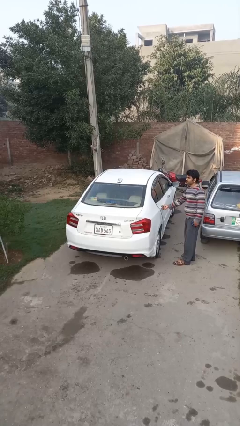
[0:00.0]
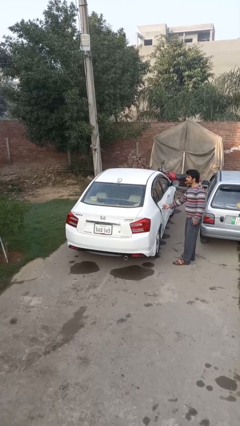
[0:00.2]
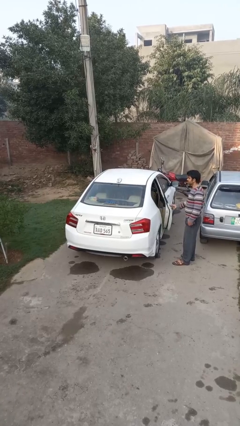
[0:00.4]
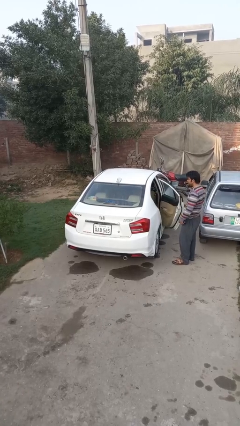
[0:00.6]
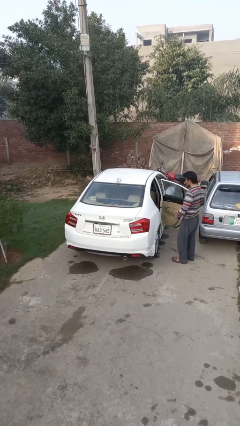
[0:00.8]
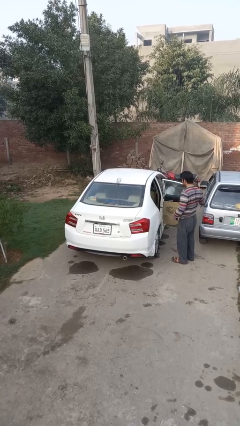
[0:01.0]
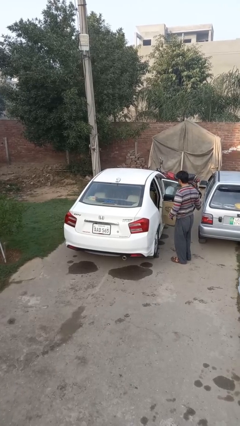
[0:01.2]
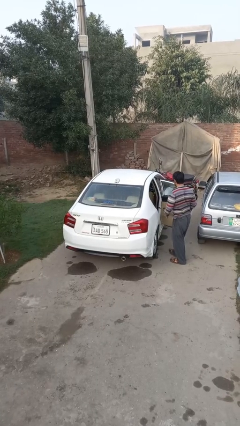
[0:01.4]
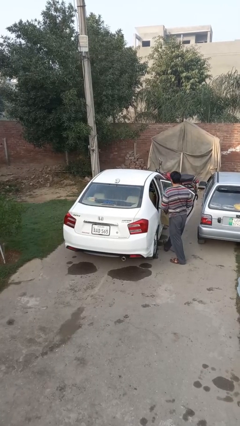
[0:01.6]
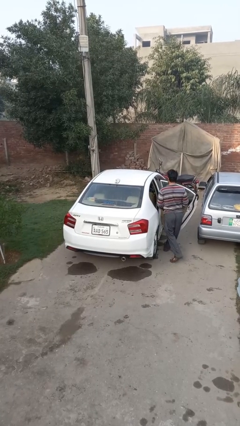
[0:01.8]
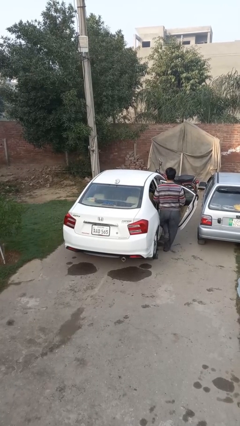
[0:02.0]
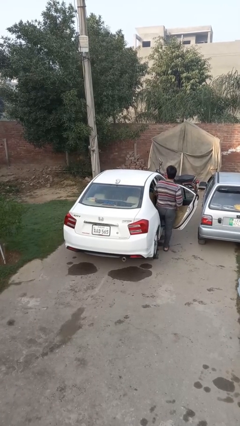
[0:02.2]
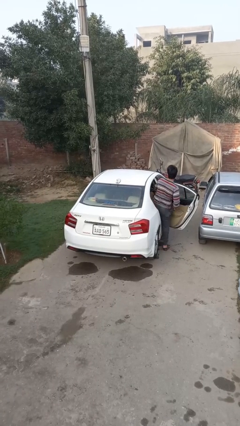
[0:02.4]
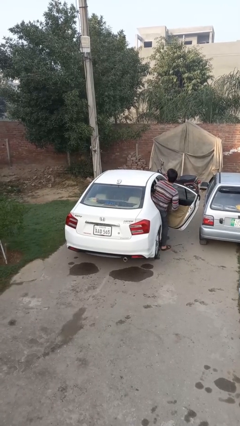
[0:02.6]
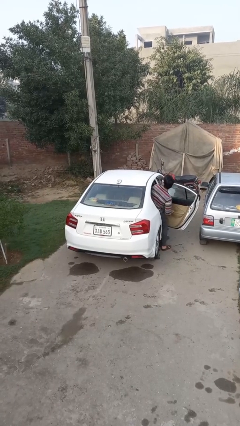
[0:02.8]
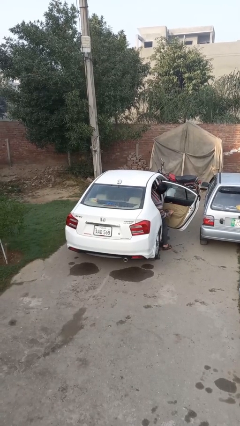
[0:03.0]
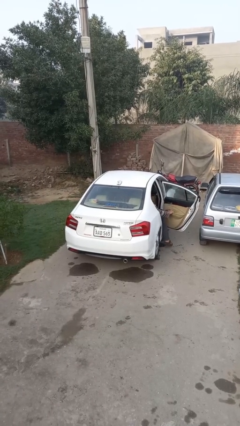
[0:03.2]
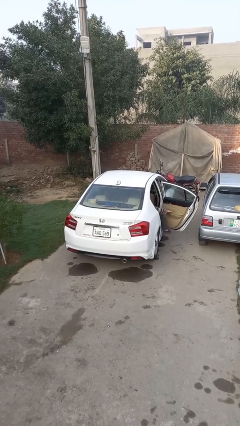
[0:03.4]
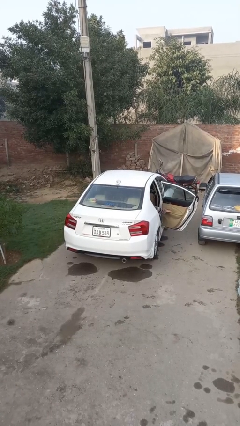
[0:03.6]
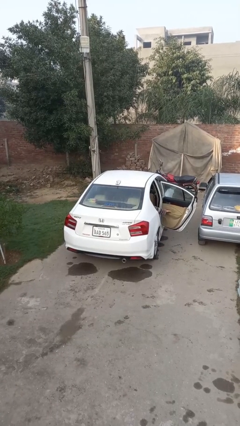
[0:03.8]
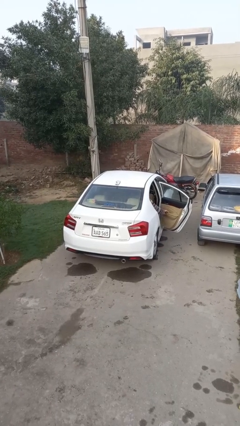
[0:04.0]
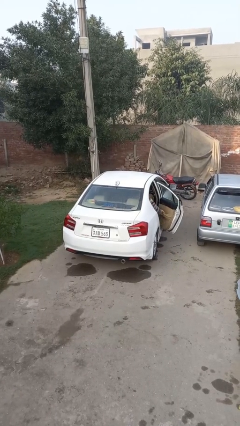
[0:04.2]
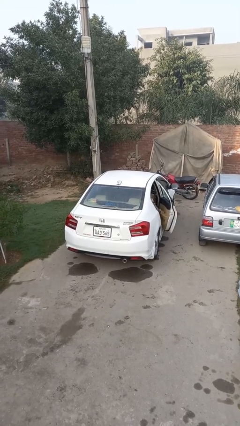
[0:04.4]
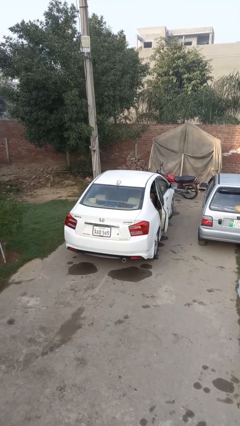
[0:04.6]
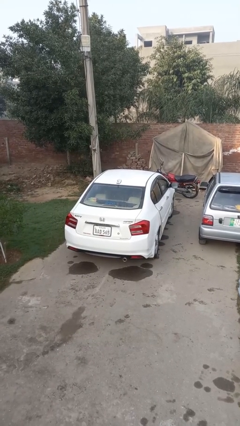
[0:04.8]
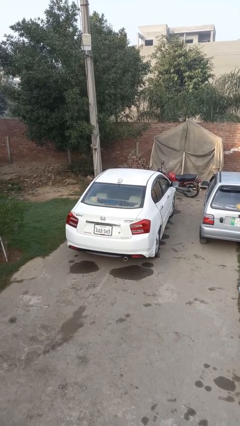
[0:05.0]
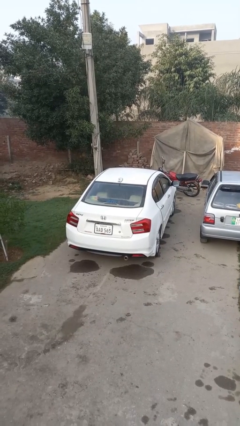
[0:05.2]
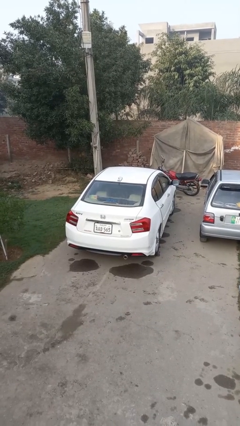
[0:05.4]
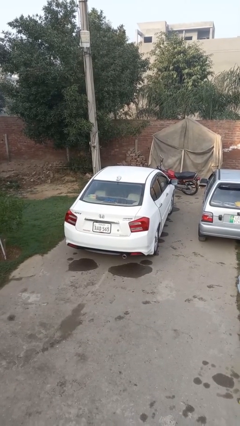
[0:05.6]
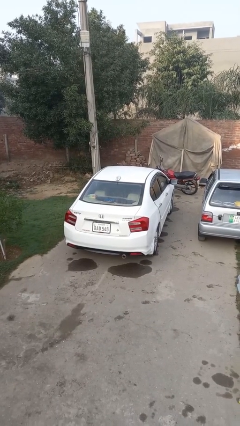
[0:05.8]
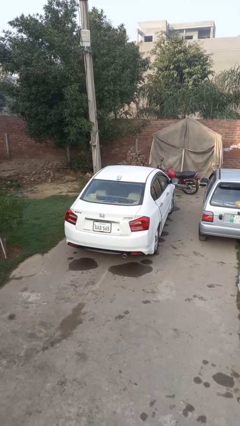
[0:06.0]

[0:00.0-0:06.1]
car picks up person

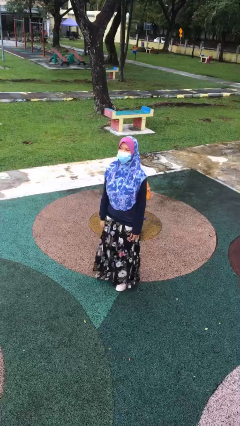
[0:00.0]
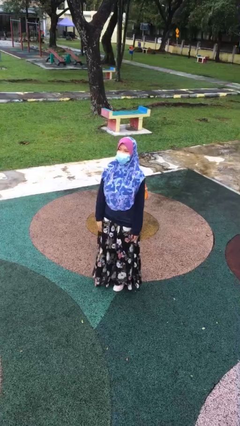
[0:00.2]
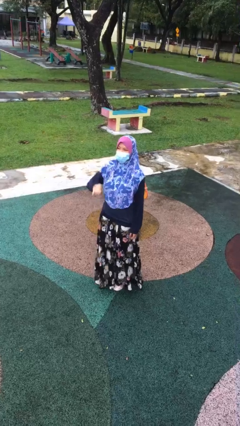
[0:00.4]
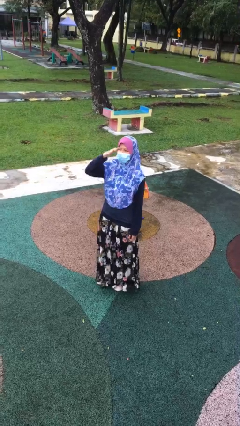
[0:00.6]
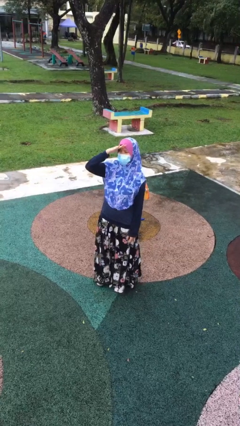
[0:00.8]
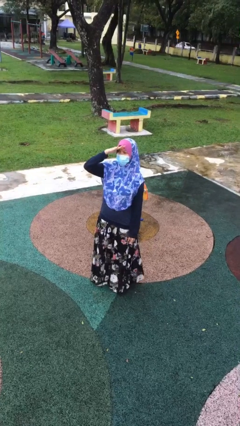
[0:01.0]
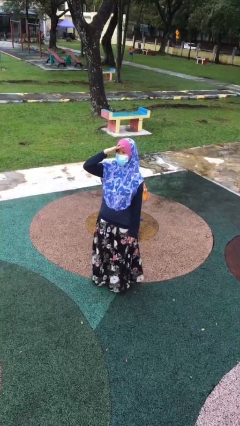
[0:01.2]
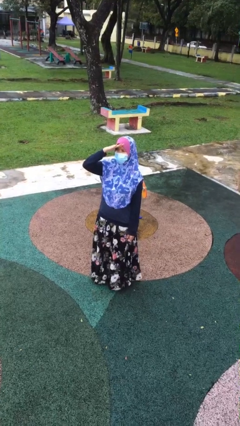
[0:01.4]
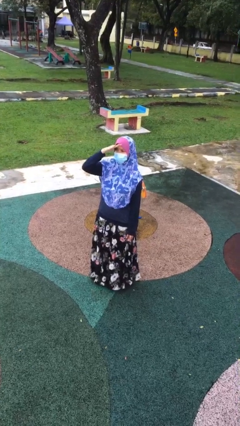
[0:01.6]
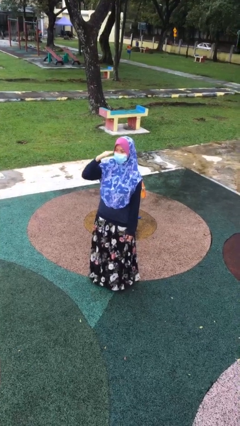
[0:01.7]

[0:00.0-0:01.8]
person salutes

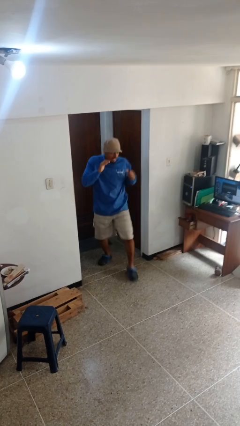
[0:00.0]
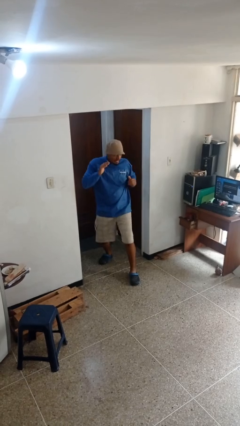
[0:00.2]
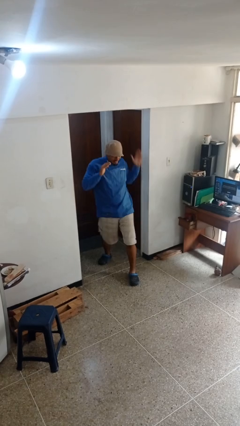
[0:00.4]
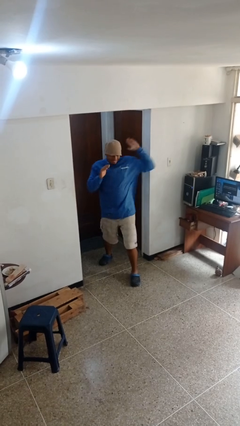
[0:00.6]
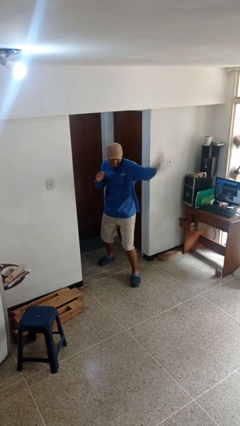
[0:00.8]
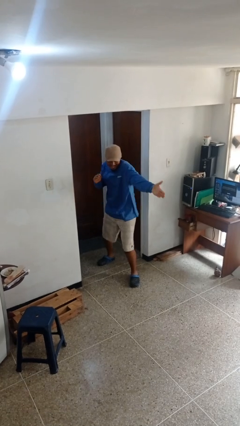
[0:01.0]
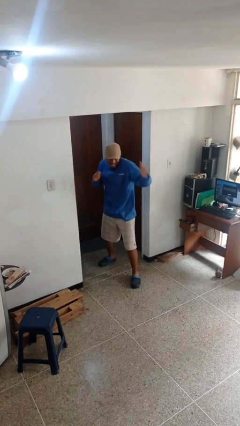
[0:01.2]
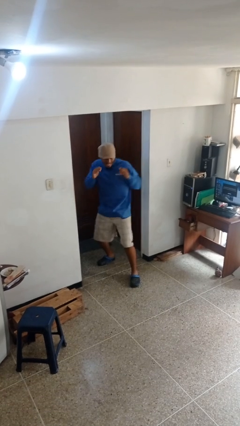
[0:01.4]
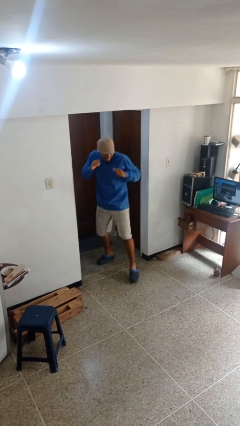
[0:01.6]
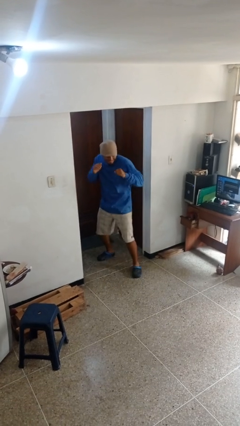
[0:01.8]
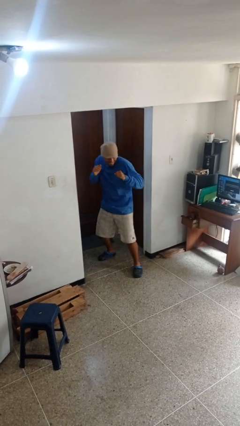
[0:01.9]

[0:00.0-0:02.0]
person karate chop

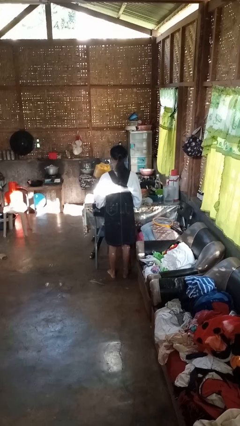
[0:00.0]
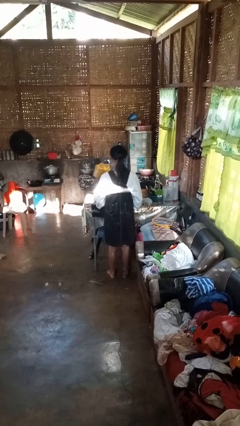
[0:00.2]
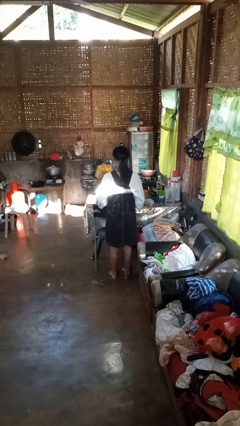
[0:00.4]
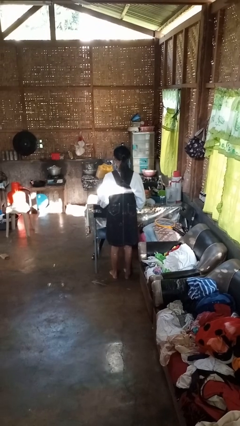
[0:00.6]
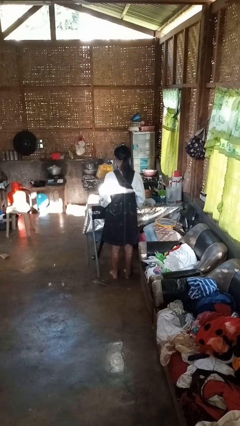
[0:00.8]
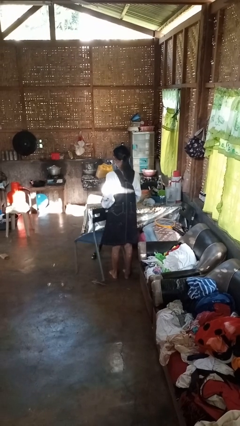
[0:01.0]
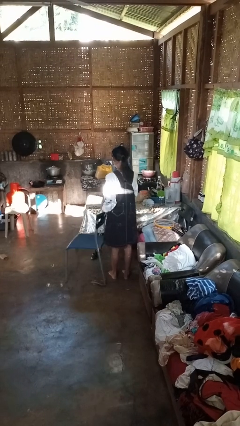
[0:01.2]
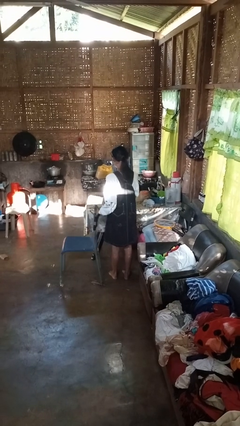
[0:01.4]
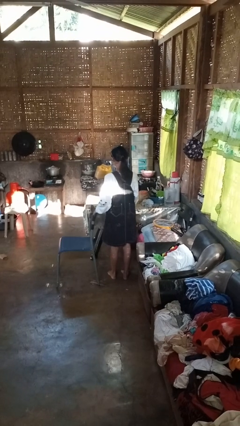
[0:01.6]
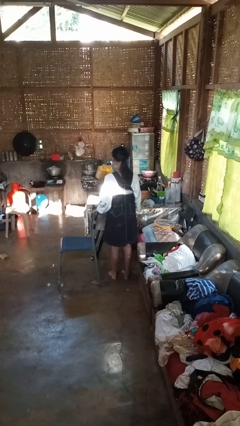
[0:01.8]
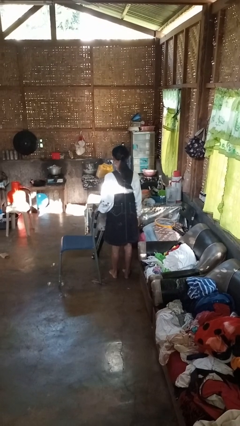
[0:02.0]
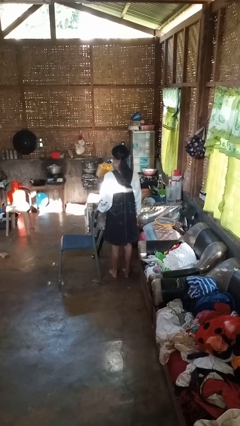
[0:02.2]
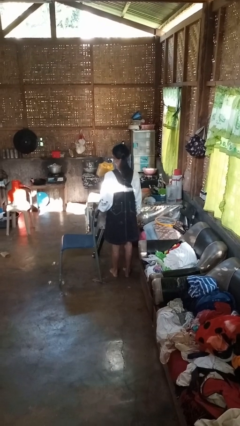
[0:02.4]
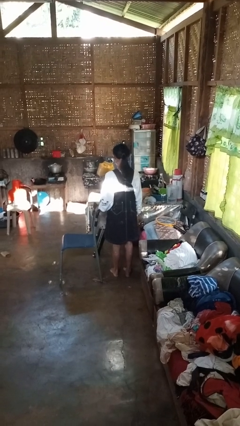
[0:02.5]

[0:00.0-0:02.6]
person pulls out chair

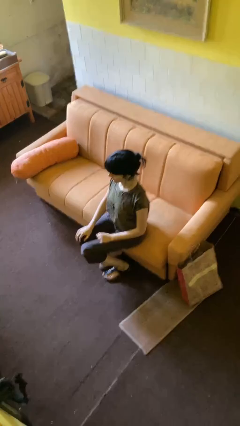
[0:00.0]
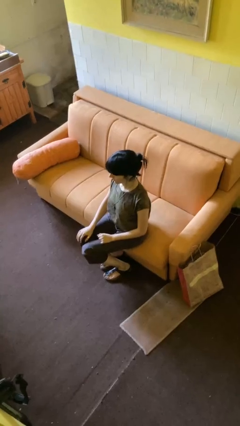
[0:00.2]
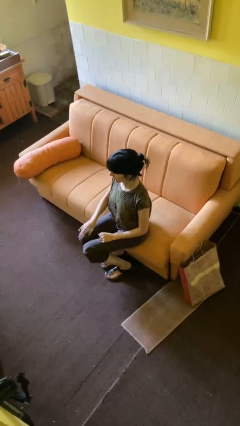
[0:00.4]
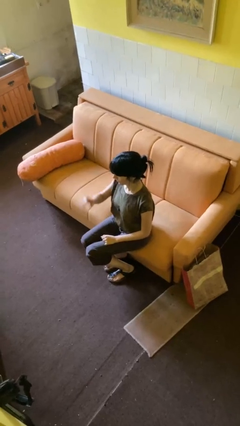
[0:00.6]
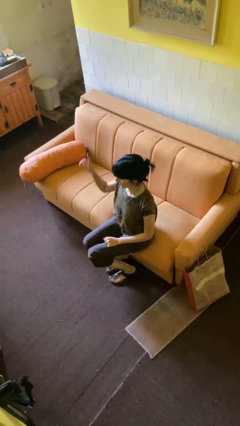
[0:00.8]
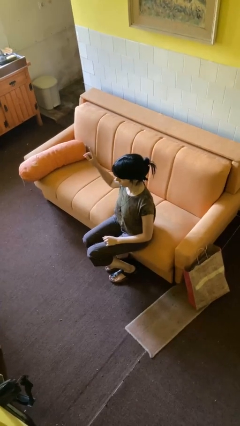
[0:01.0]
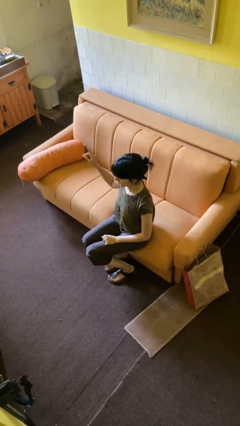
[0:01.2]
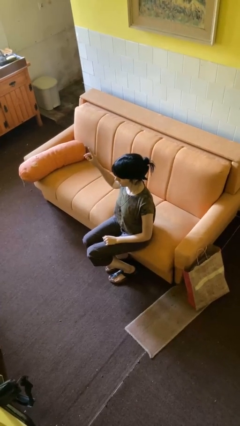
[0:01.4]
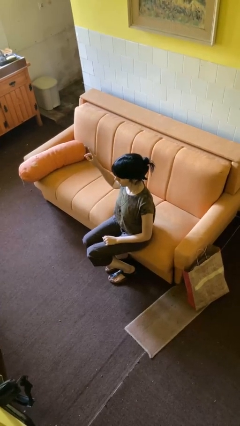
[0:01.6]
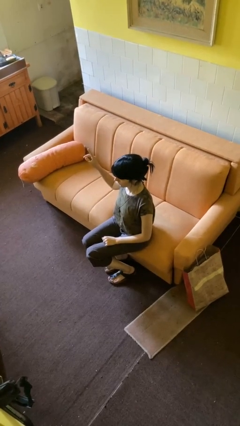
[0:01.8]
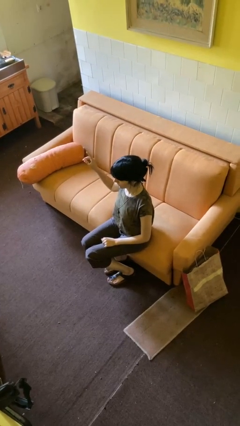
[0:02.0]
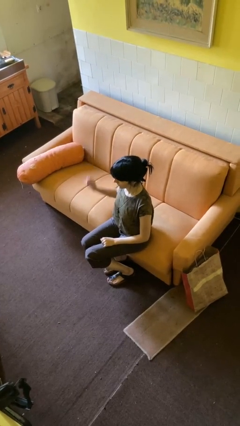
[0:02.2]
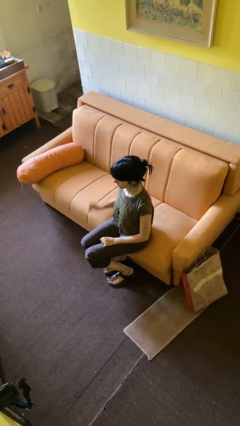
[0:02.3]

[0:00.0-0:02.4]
person gestures swipe right

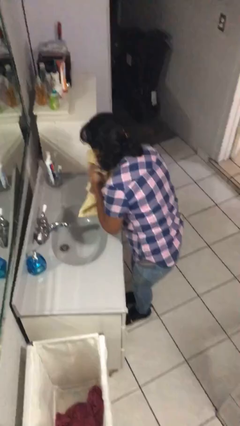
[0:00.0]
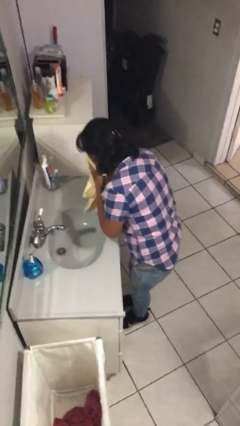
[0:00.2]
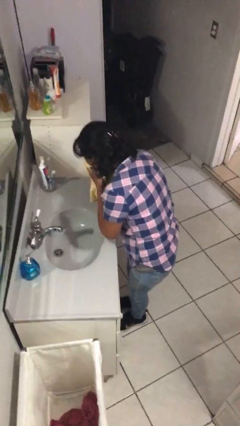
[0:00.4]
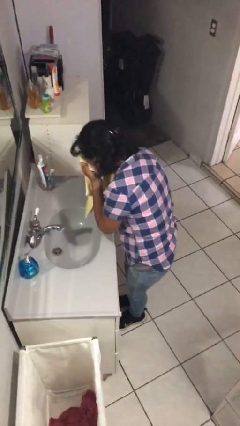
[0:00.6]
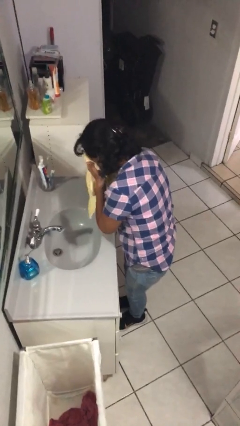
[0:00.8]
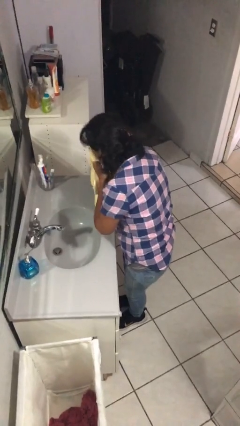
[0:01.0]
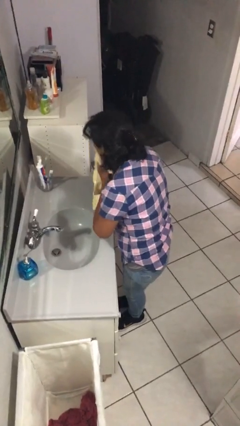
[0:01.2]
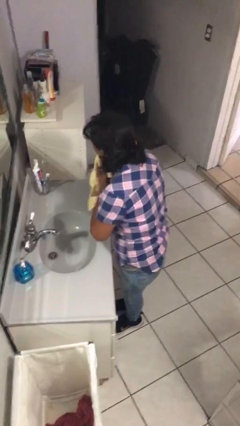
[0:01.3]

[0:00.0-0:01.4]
person dries face with towel

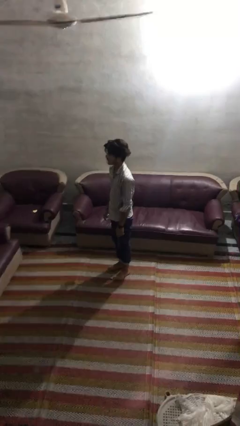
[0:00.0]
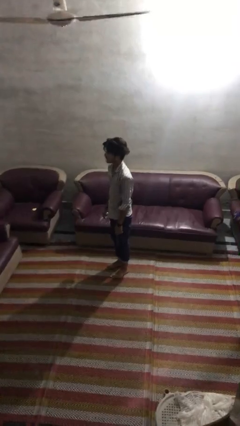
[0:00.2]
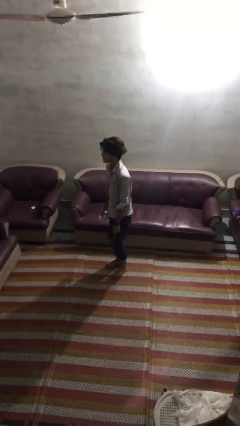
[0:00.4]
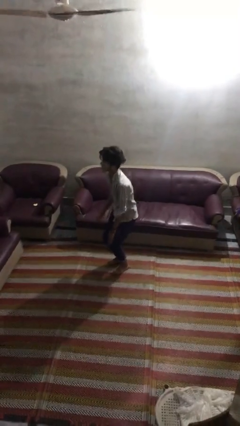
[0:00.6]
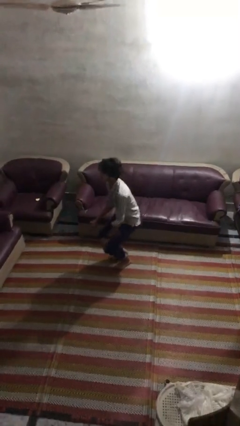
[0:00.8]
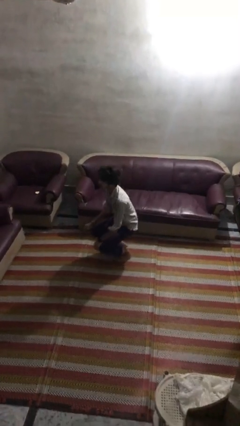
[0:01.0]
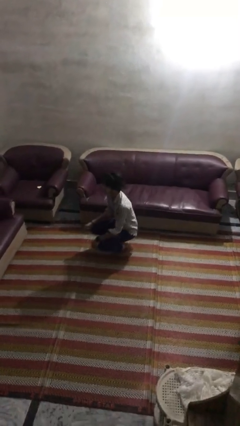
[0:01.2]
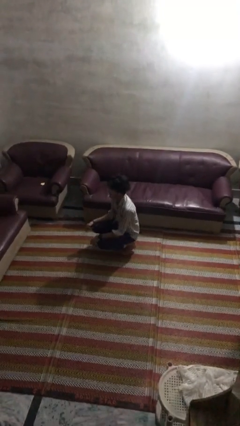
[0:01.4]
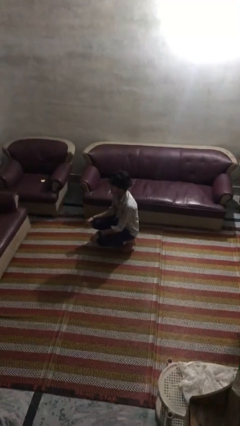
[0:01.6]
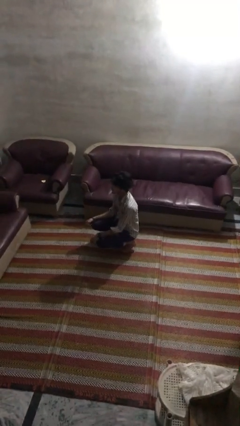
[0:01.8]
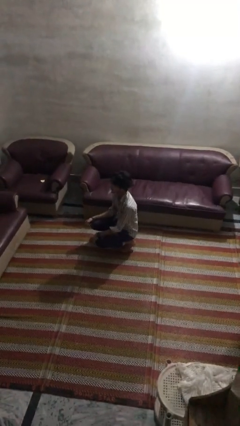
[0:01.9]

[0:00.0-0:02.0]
person squats
